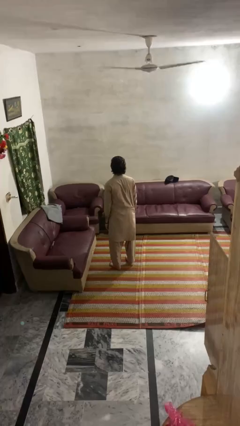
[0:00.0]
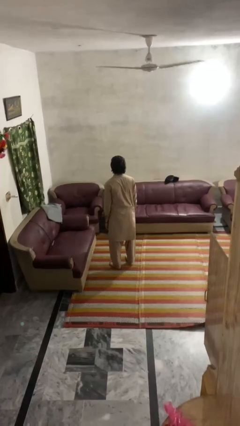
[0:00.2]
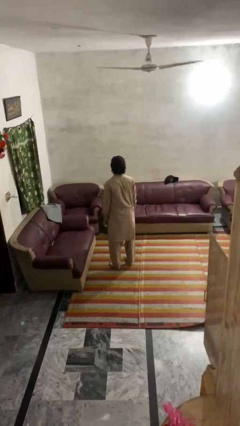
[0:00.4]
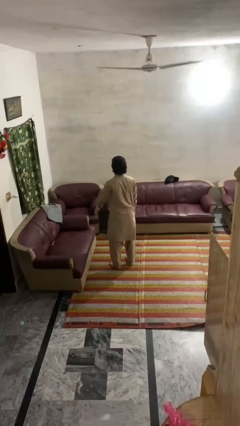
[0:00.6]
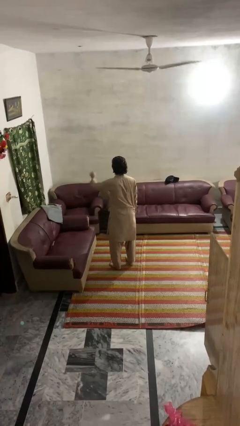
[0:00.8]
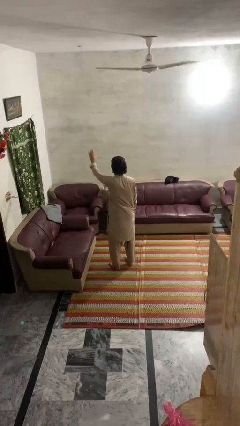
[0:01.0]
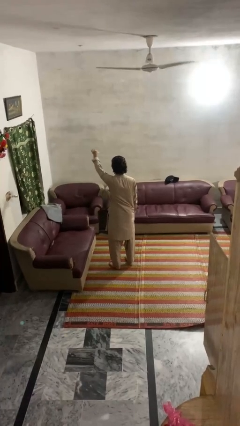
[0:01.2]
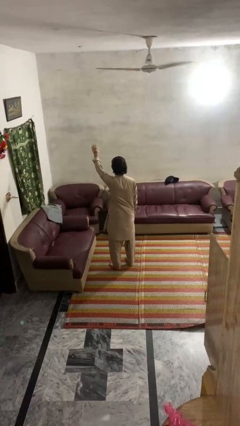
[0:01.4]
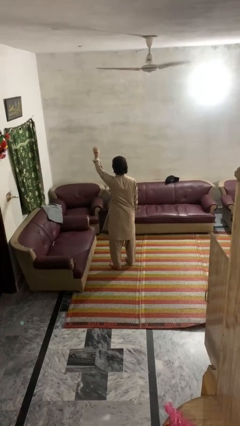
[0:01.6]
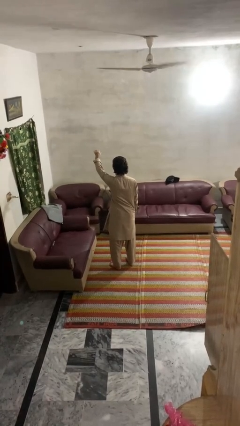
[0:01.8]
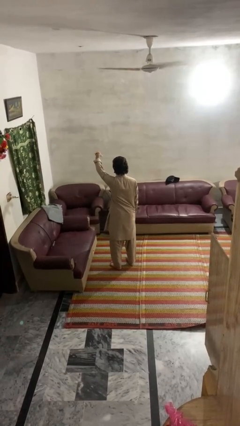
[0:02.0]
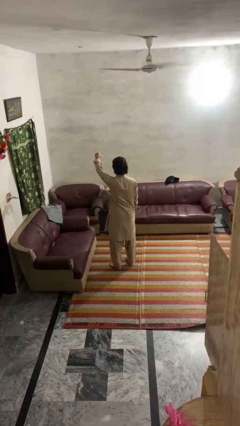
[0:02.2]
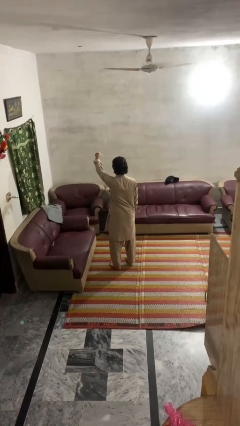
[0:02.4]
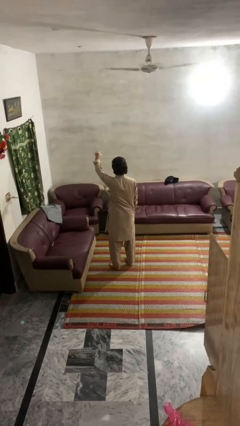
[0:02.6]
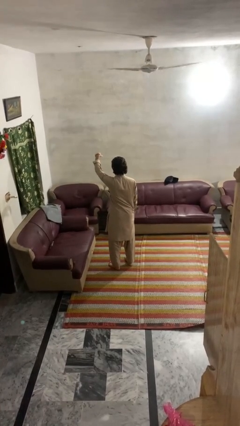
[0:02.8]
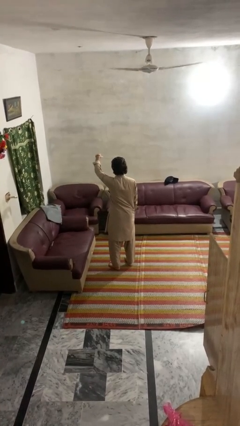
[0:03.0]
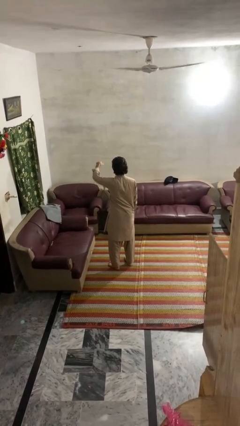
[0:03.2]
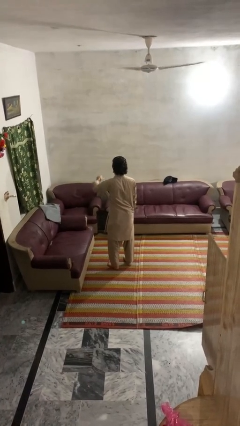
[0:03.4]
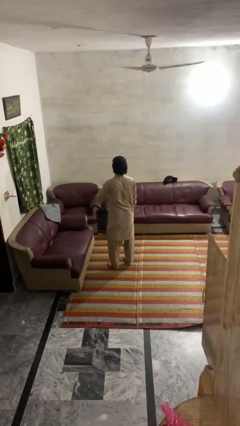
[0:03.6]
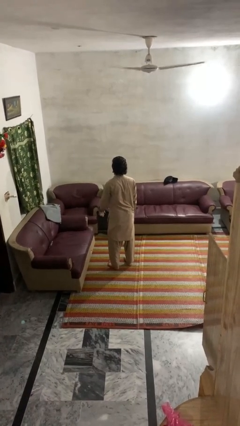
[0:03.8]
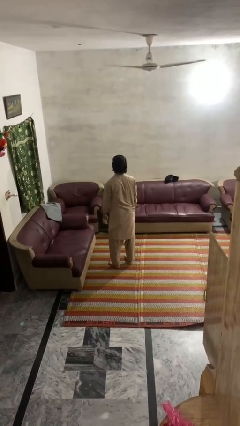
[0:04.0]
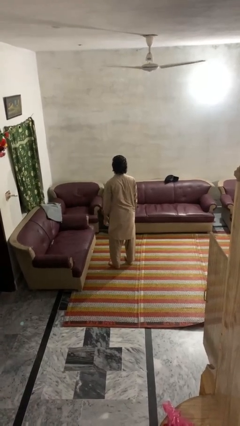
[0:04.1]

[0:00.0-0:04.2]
person gestures come here

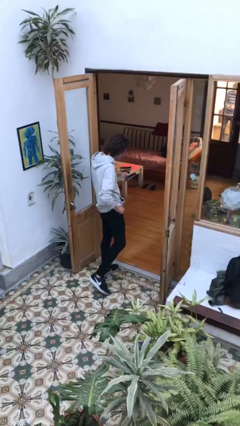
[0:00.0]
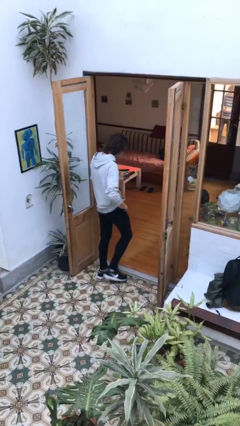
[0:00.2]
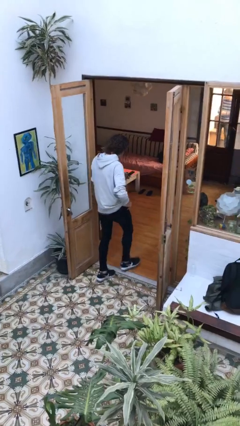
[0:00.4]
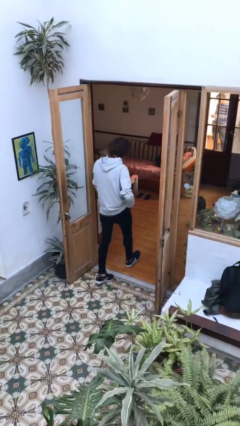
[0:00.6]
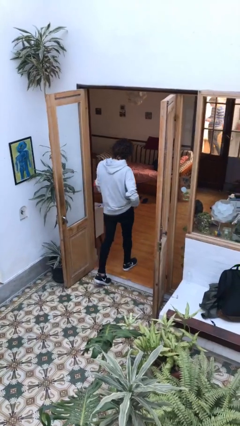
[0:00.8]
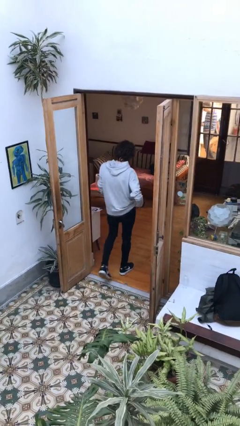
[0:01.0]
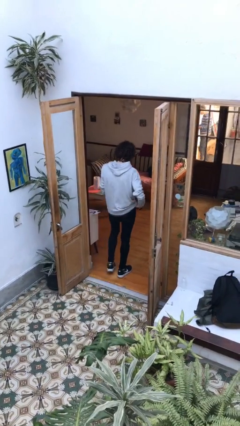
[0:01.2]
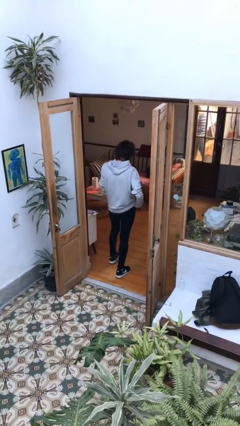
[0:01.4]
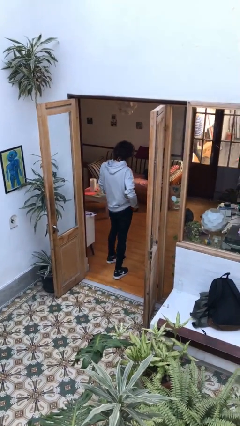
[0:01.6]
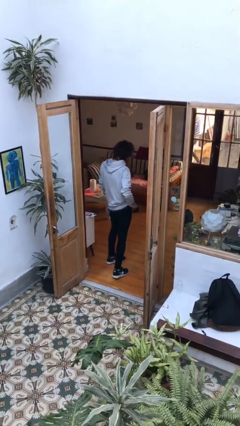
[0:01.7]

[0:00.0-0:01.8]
person exits scene through structure

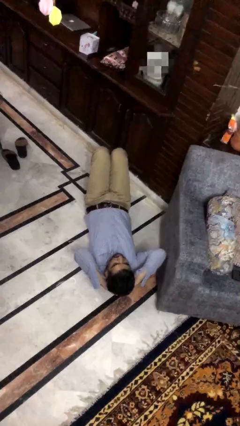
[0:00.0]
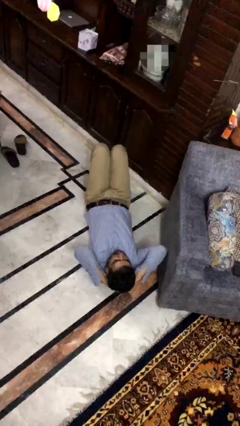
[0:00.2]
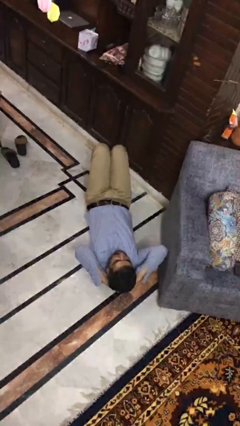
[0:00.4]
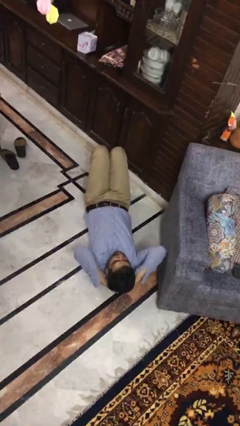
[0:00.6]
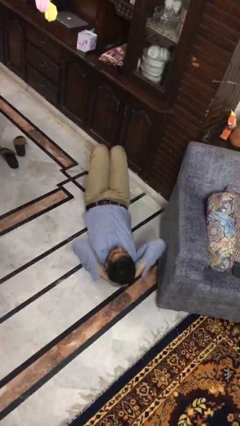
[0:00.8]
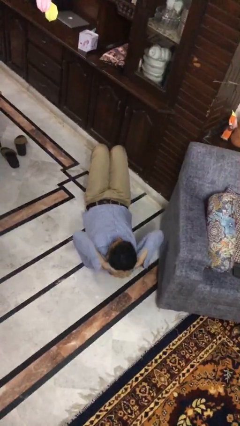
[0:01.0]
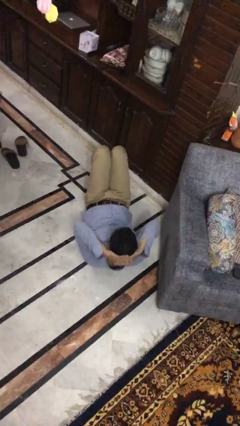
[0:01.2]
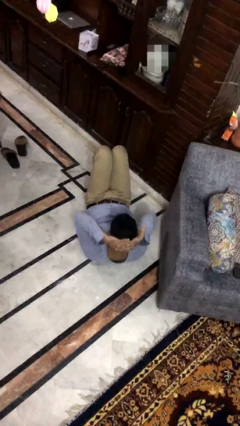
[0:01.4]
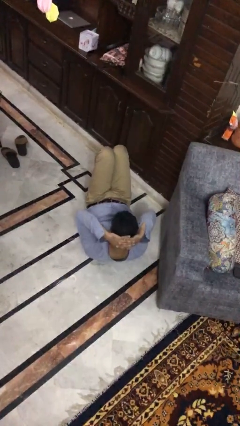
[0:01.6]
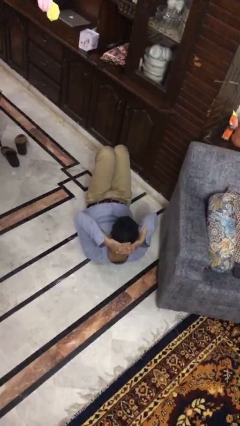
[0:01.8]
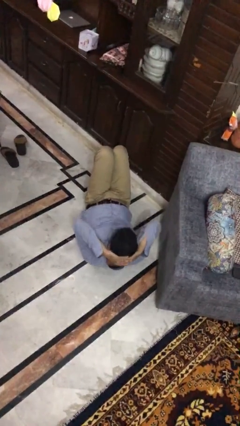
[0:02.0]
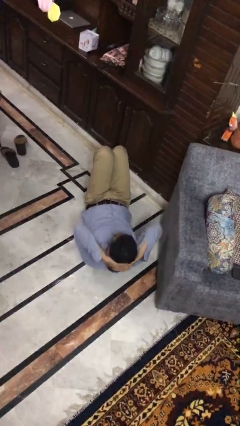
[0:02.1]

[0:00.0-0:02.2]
person exercises with situp

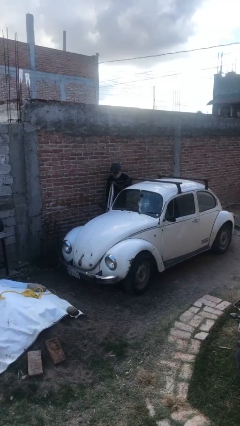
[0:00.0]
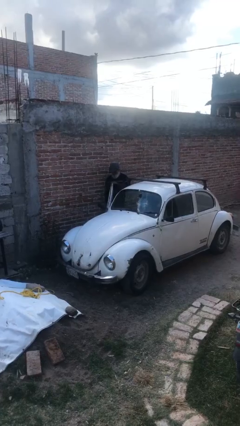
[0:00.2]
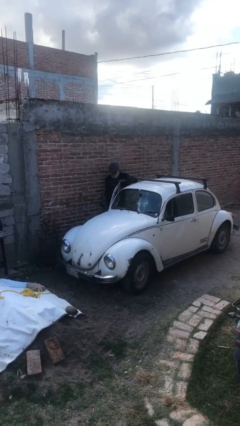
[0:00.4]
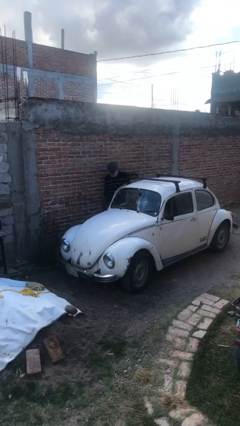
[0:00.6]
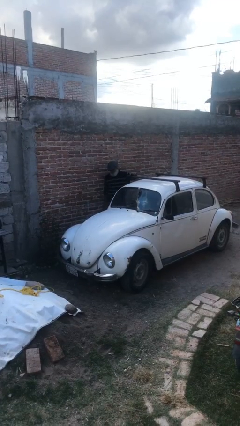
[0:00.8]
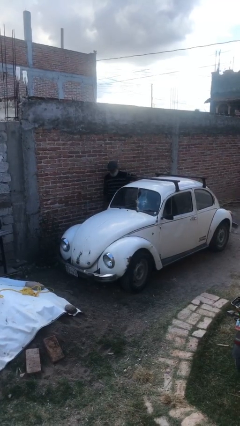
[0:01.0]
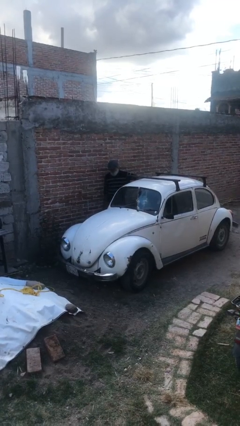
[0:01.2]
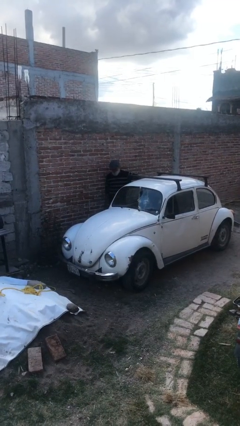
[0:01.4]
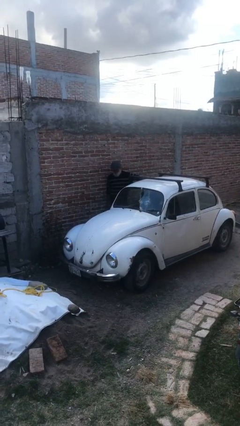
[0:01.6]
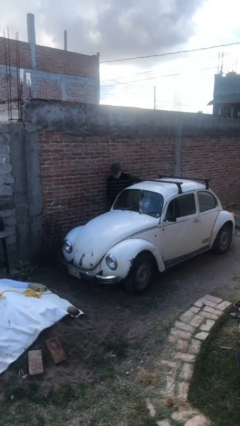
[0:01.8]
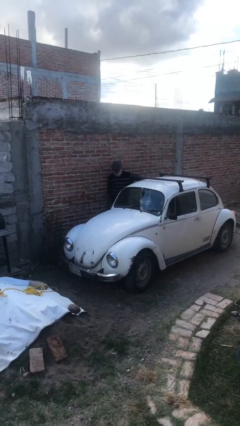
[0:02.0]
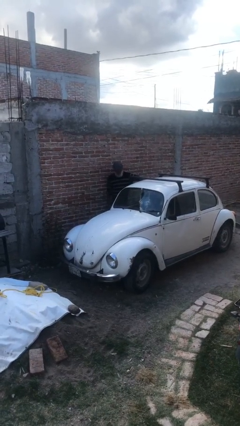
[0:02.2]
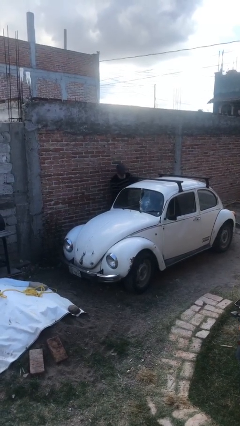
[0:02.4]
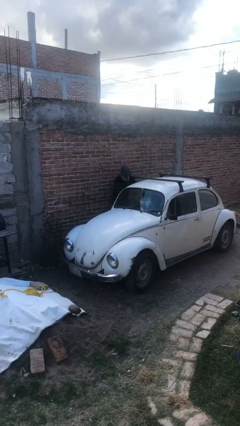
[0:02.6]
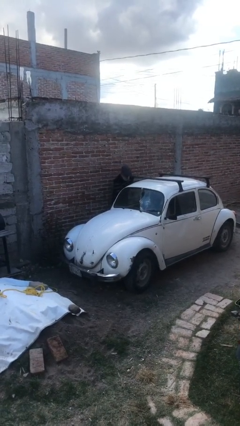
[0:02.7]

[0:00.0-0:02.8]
person closes car door

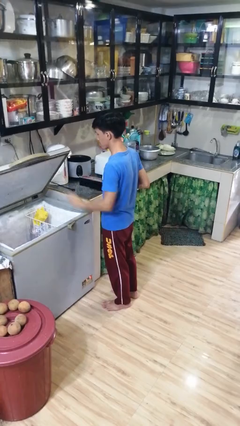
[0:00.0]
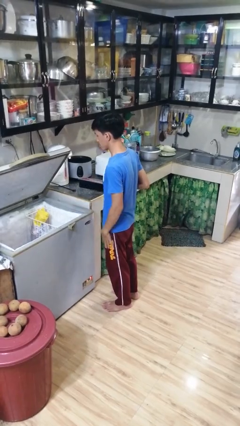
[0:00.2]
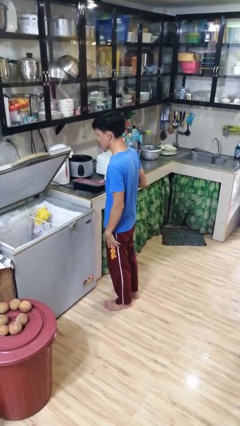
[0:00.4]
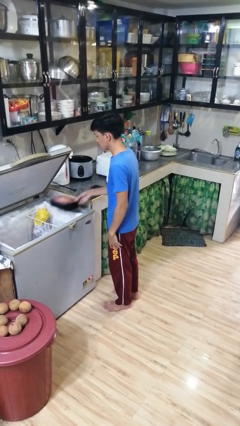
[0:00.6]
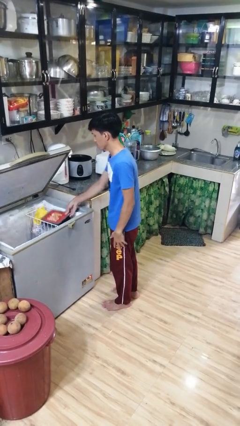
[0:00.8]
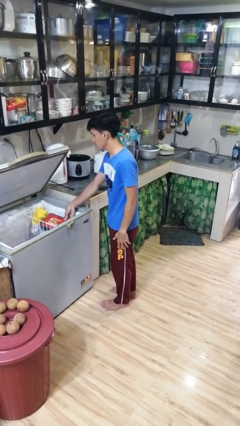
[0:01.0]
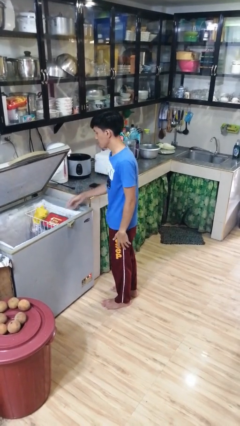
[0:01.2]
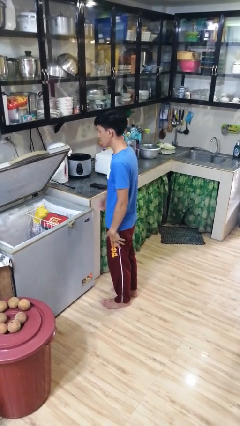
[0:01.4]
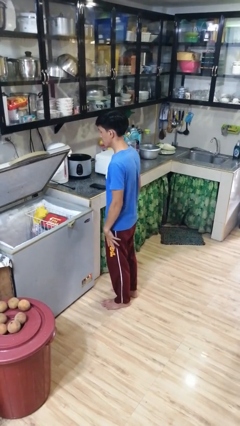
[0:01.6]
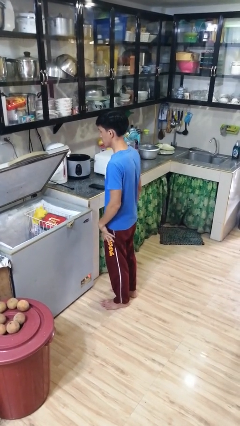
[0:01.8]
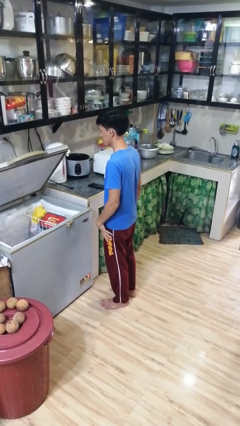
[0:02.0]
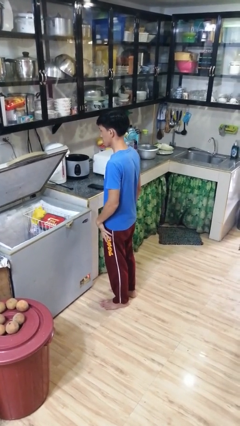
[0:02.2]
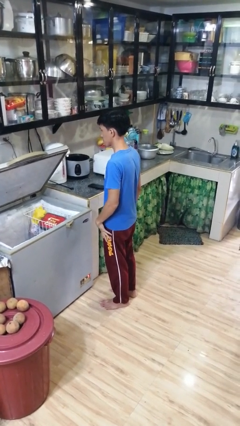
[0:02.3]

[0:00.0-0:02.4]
person puts object into refrigerator

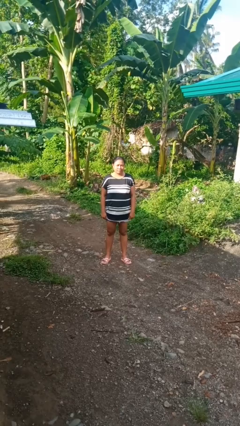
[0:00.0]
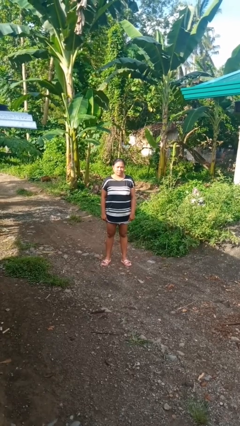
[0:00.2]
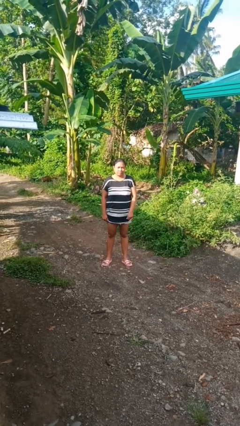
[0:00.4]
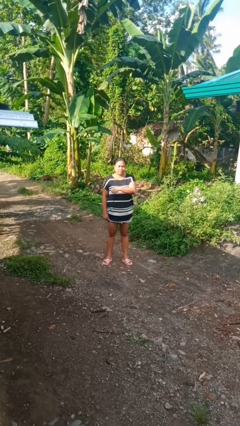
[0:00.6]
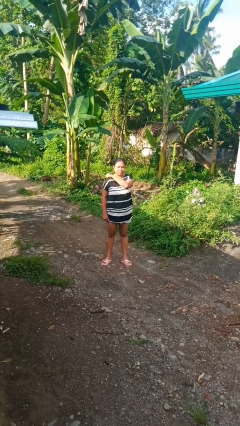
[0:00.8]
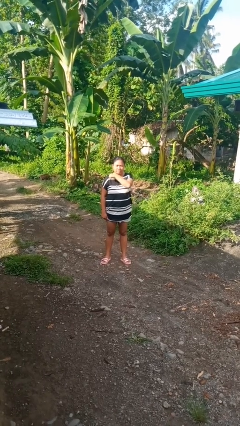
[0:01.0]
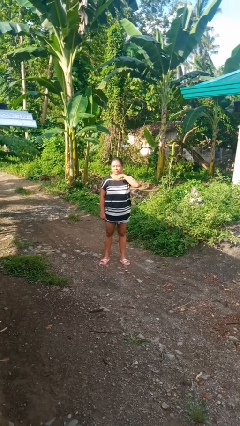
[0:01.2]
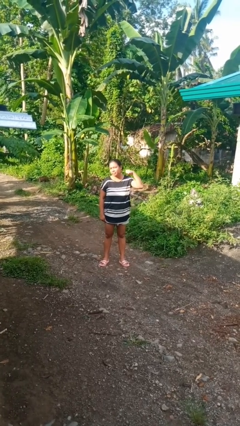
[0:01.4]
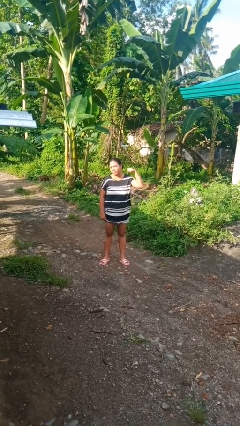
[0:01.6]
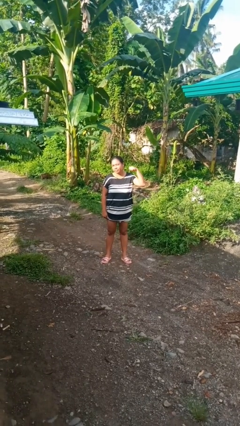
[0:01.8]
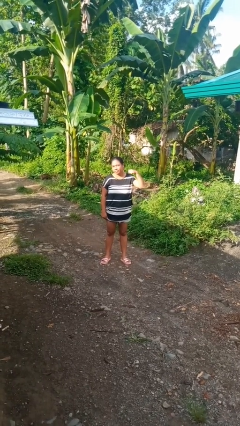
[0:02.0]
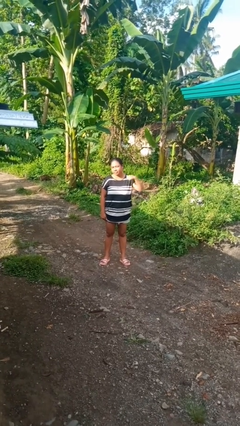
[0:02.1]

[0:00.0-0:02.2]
person gestures cut

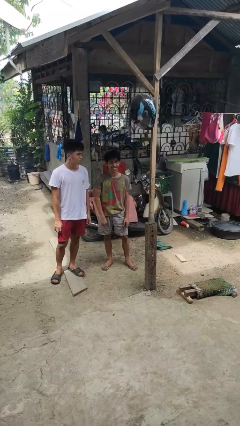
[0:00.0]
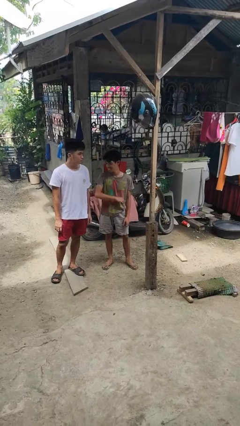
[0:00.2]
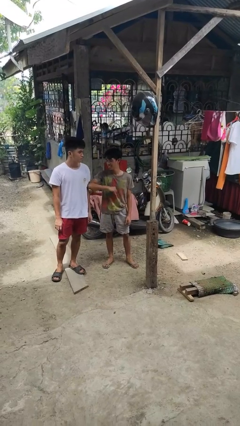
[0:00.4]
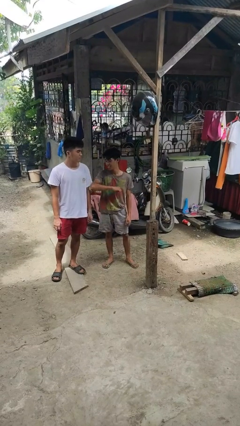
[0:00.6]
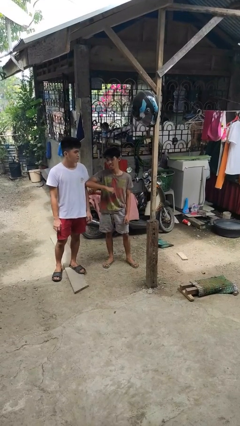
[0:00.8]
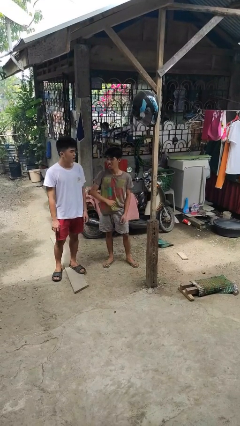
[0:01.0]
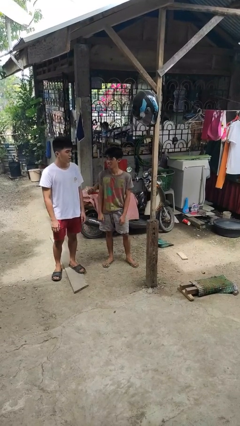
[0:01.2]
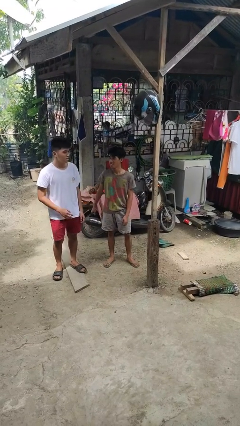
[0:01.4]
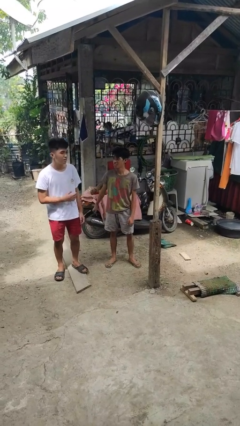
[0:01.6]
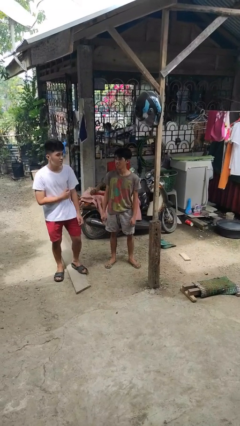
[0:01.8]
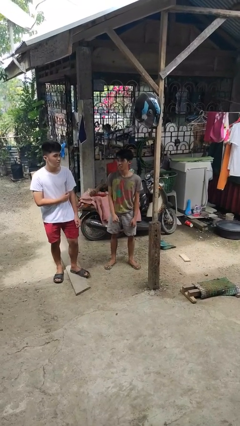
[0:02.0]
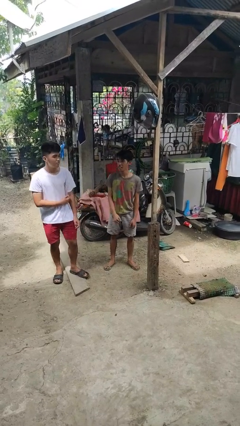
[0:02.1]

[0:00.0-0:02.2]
person nudges person with elbow
